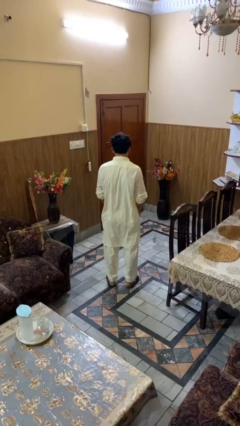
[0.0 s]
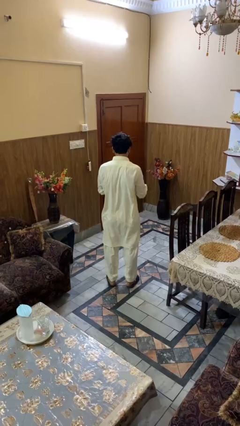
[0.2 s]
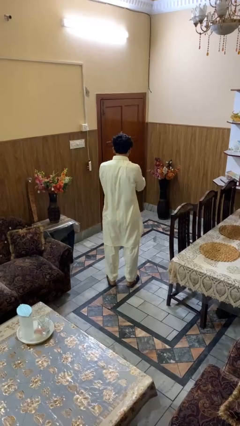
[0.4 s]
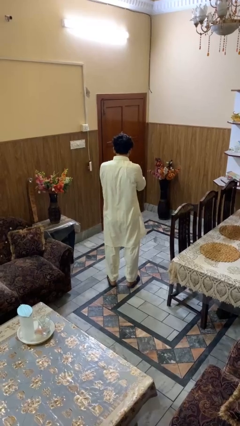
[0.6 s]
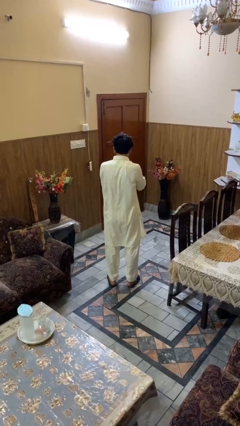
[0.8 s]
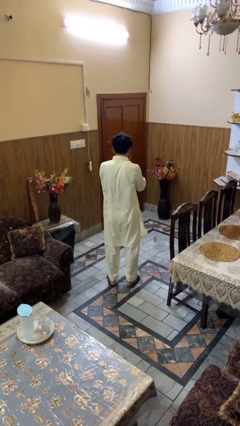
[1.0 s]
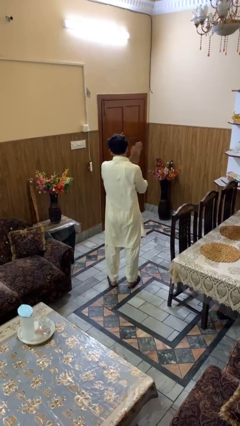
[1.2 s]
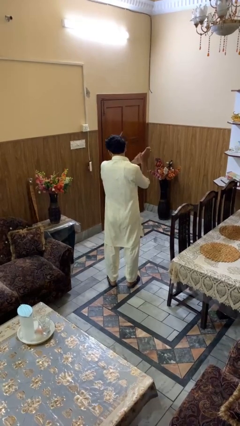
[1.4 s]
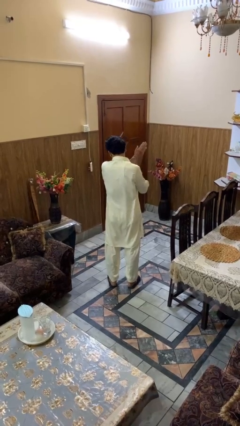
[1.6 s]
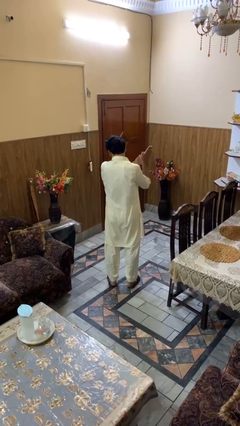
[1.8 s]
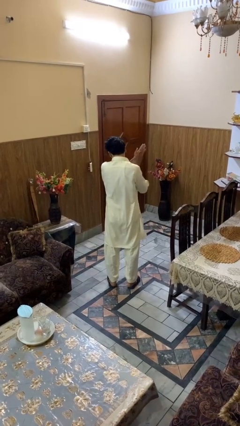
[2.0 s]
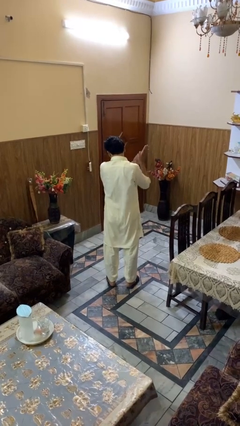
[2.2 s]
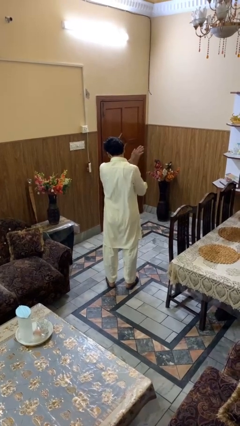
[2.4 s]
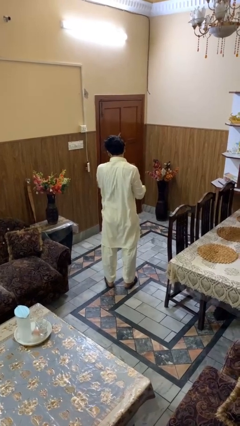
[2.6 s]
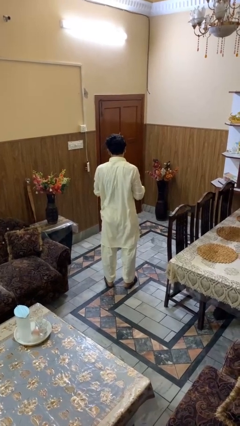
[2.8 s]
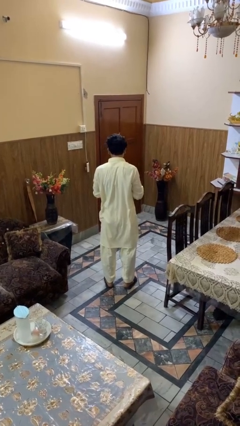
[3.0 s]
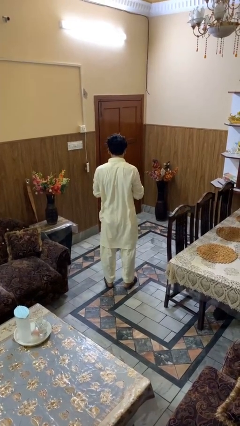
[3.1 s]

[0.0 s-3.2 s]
person blows into hands

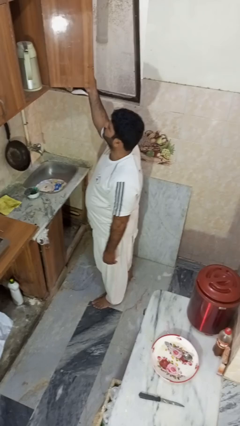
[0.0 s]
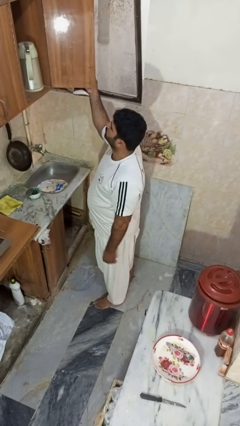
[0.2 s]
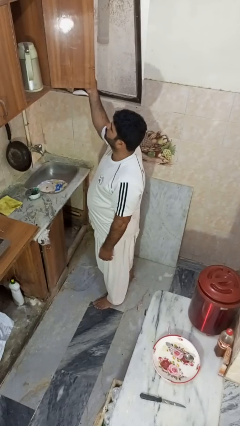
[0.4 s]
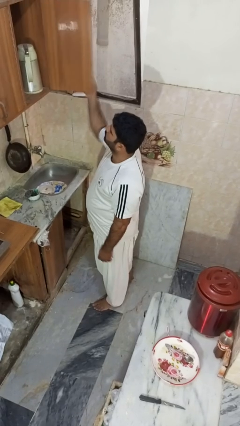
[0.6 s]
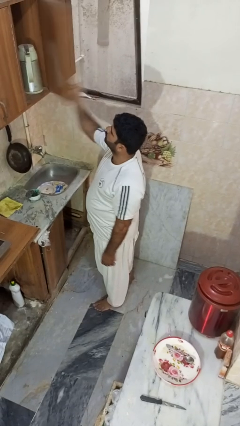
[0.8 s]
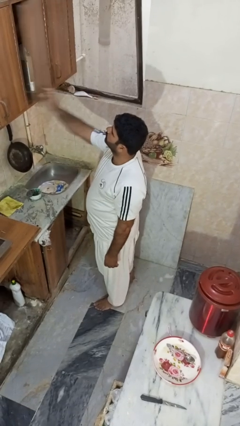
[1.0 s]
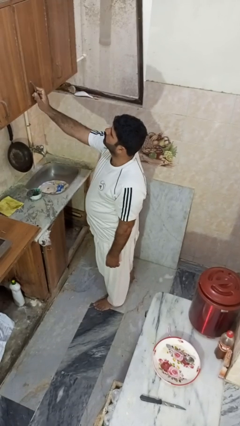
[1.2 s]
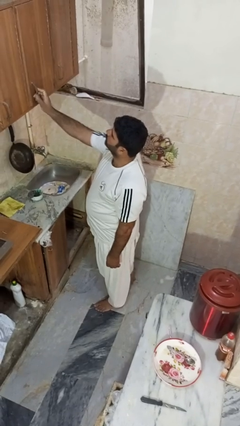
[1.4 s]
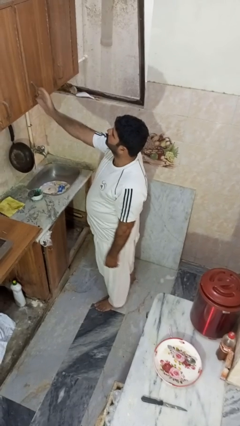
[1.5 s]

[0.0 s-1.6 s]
person closes cabinet

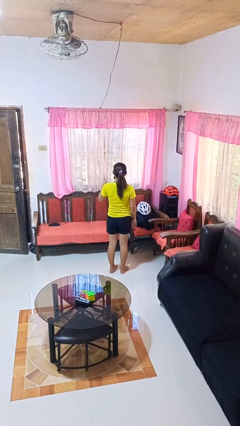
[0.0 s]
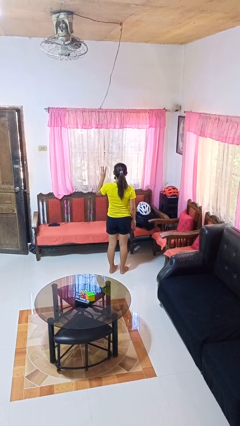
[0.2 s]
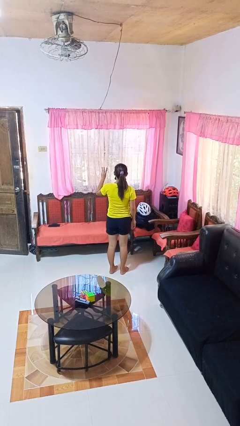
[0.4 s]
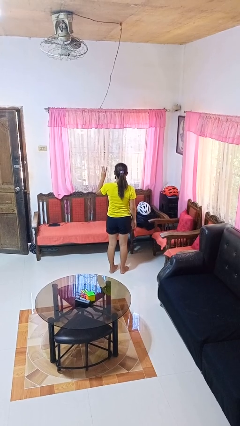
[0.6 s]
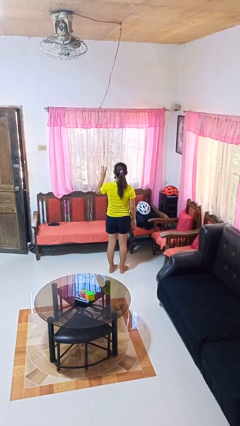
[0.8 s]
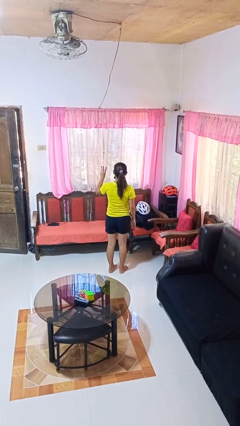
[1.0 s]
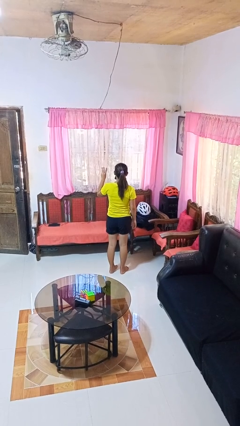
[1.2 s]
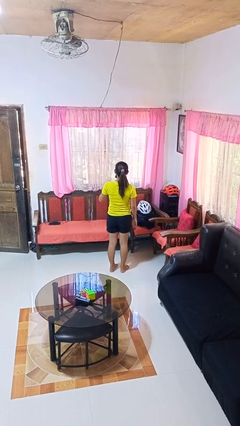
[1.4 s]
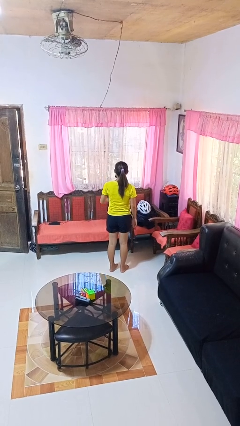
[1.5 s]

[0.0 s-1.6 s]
person gestures number three

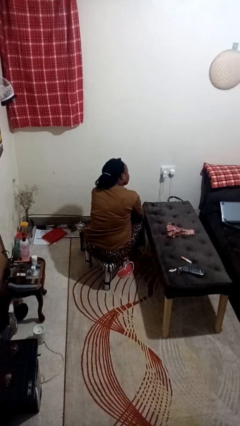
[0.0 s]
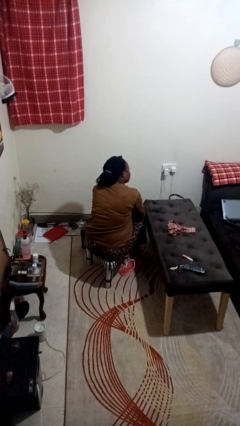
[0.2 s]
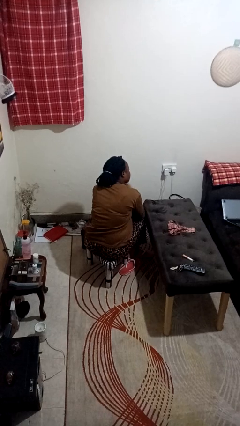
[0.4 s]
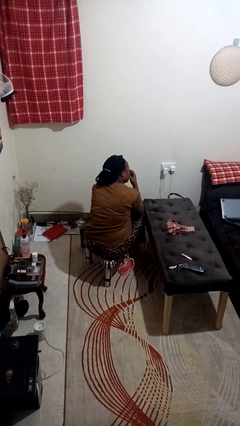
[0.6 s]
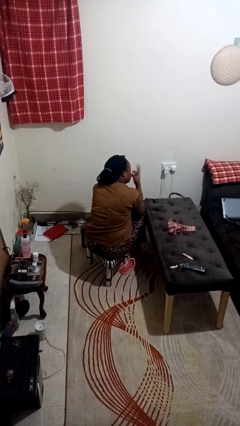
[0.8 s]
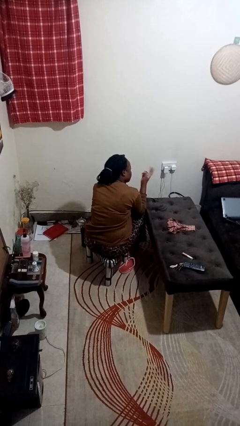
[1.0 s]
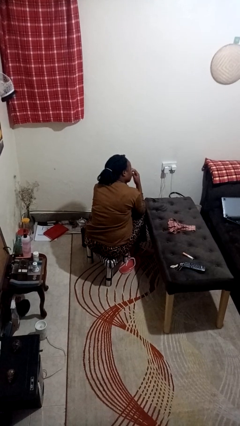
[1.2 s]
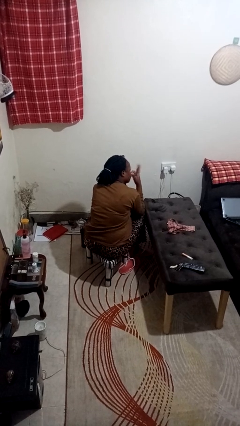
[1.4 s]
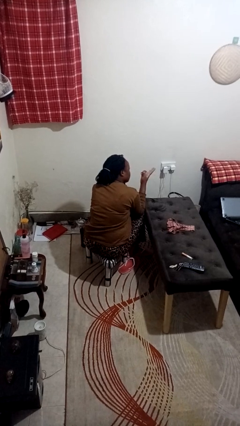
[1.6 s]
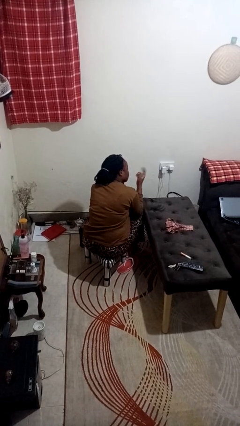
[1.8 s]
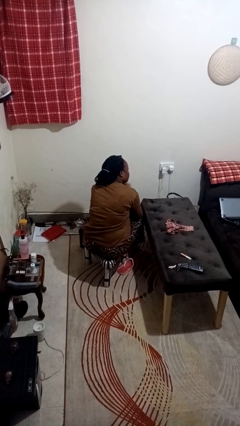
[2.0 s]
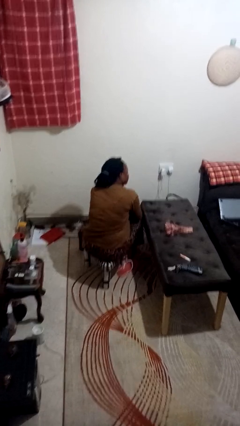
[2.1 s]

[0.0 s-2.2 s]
person gestures watch closely

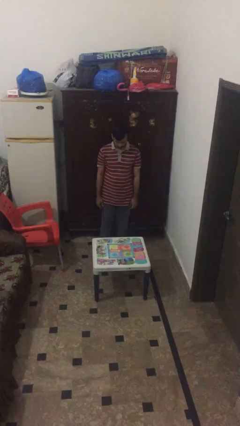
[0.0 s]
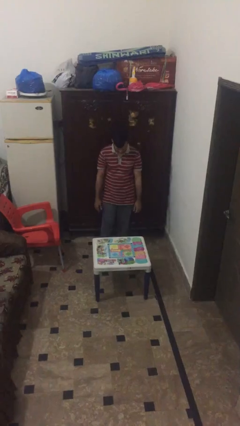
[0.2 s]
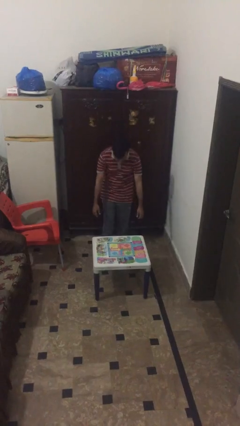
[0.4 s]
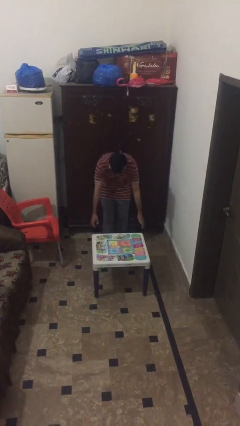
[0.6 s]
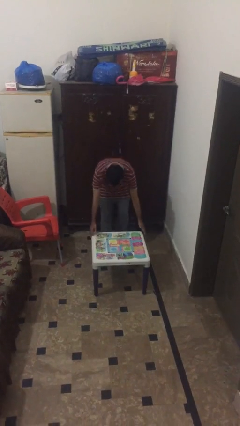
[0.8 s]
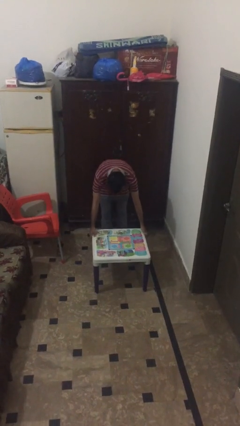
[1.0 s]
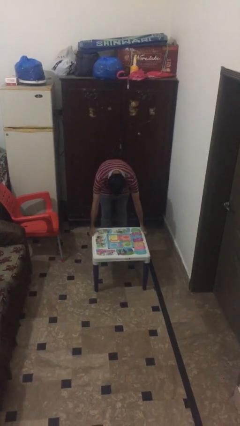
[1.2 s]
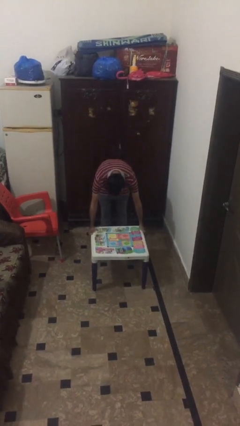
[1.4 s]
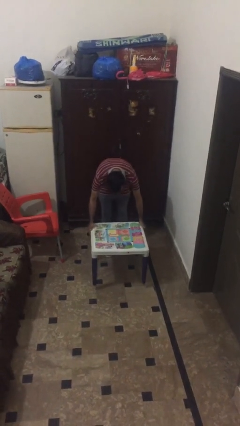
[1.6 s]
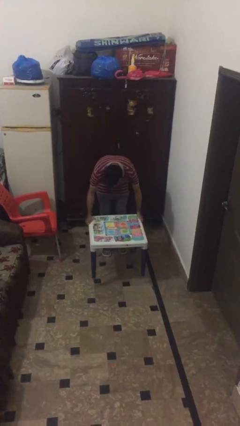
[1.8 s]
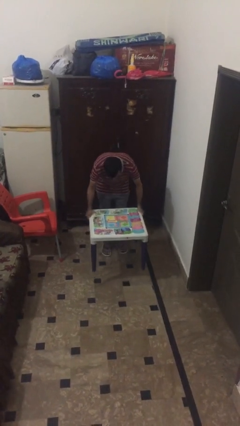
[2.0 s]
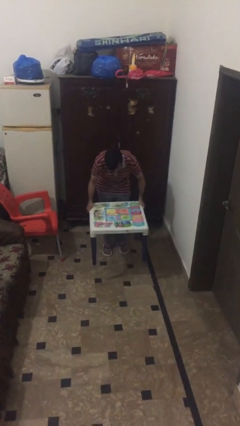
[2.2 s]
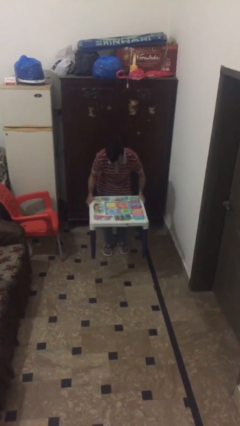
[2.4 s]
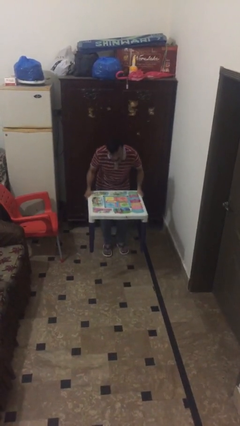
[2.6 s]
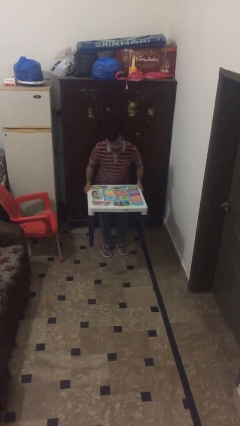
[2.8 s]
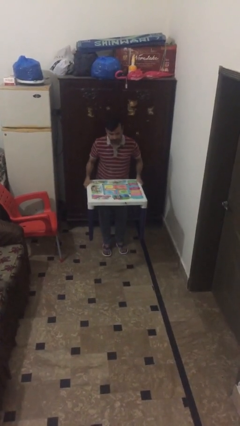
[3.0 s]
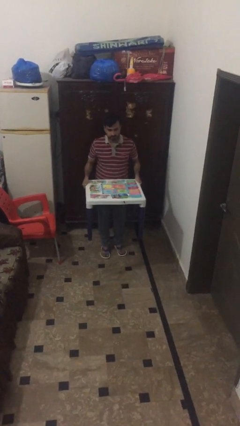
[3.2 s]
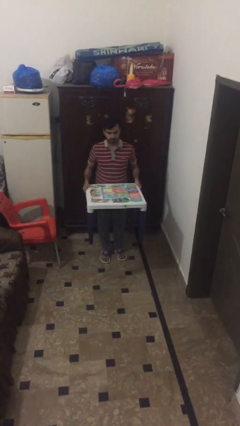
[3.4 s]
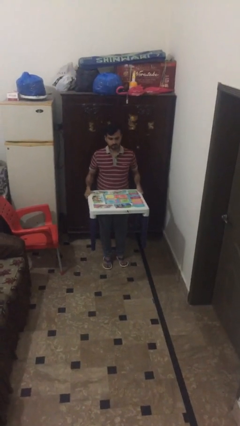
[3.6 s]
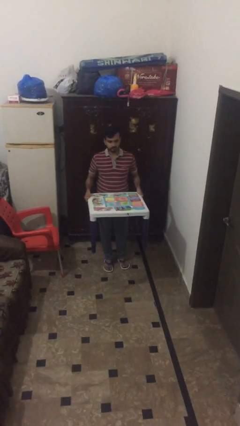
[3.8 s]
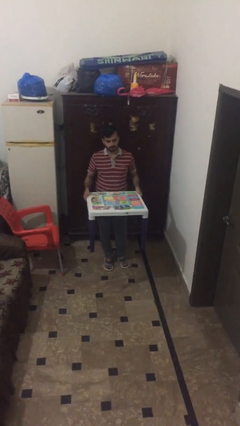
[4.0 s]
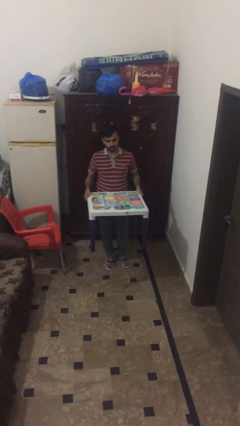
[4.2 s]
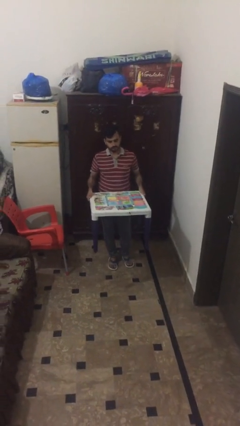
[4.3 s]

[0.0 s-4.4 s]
person picks up object from floor

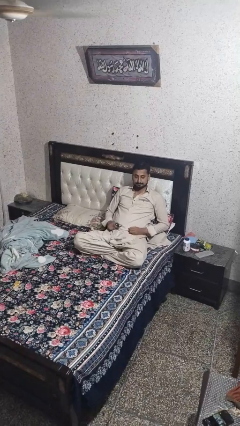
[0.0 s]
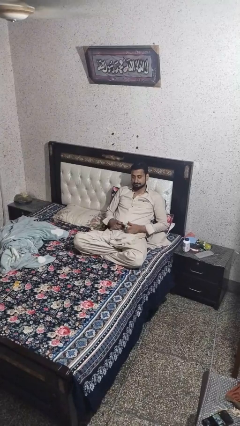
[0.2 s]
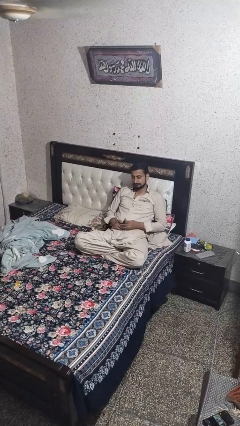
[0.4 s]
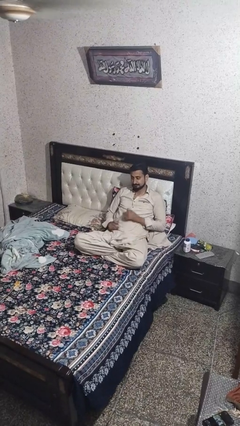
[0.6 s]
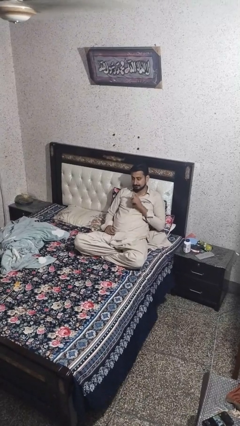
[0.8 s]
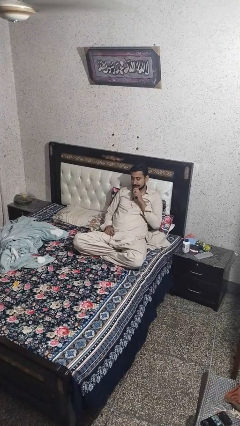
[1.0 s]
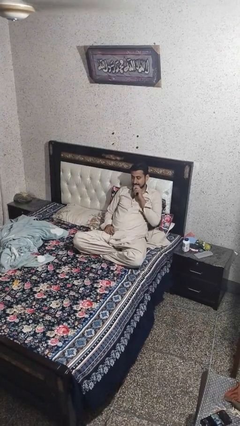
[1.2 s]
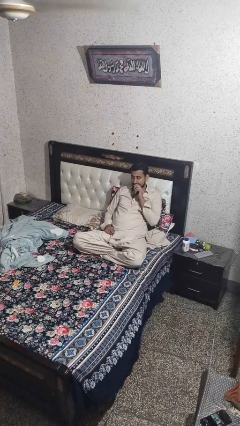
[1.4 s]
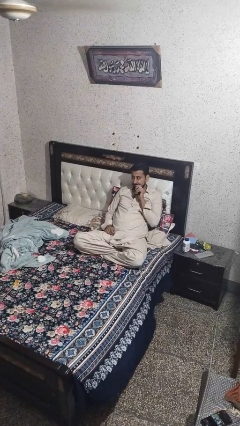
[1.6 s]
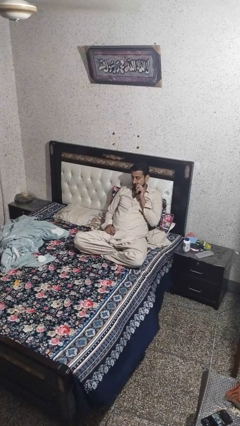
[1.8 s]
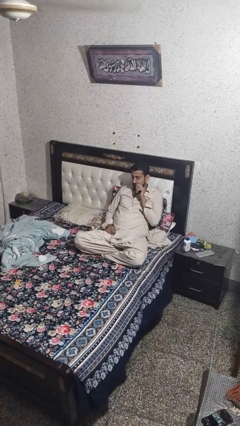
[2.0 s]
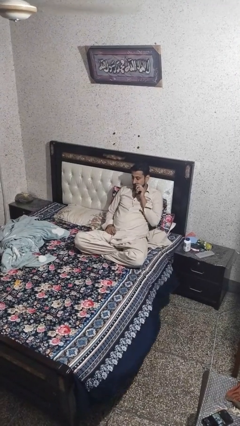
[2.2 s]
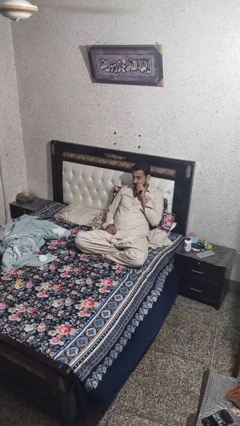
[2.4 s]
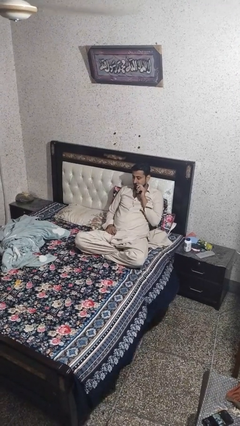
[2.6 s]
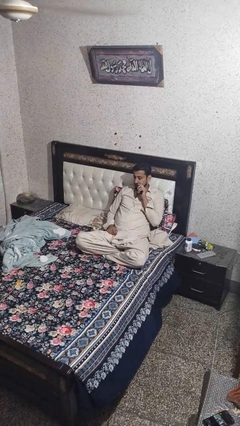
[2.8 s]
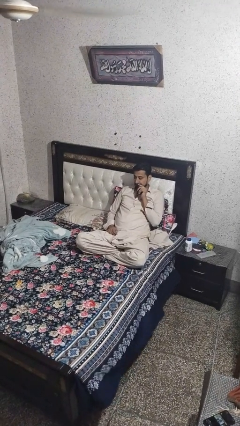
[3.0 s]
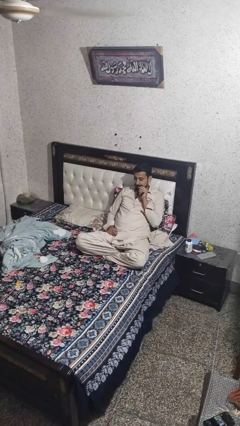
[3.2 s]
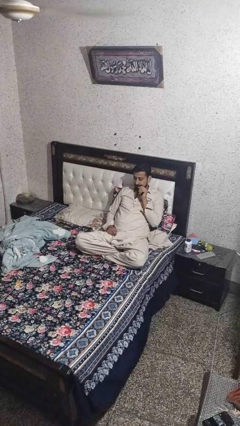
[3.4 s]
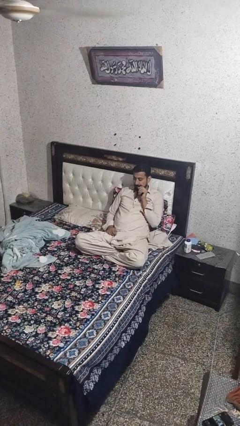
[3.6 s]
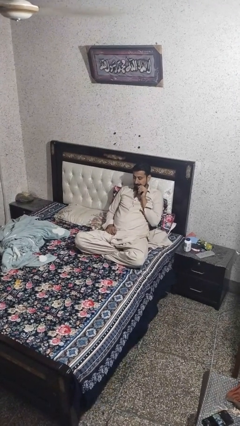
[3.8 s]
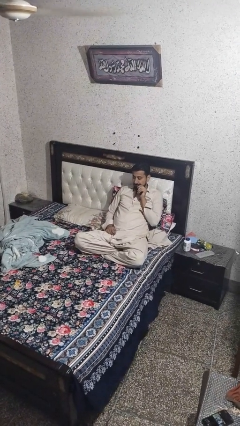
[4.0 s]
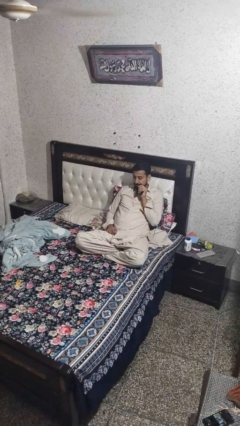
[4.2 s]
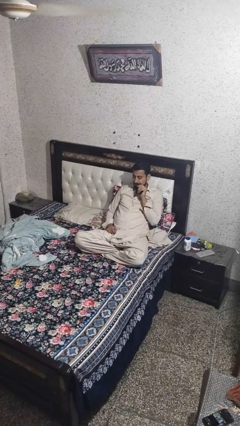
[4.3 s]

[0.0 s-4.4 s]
person vapes
